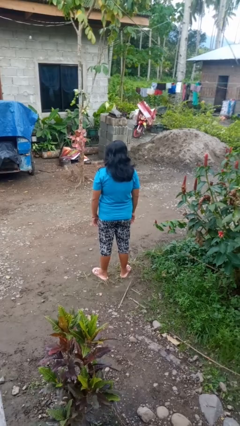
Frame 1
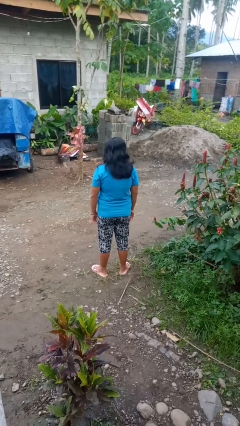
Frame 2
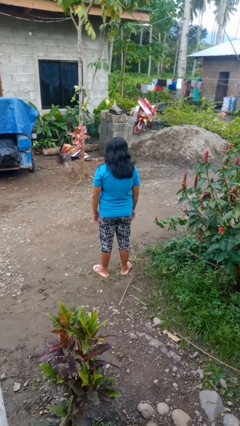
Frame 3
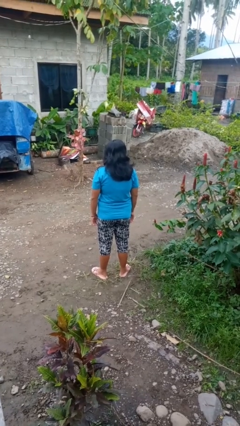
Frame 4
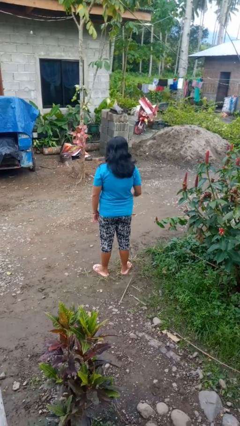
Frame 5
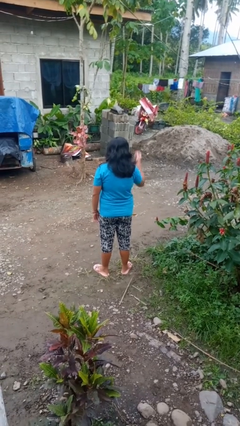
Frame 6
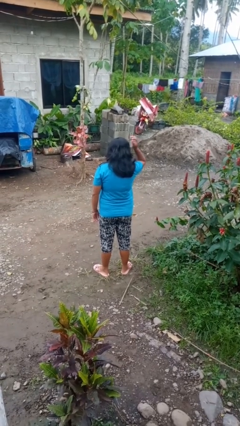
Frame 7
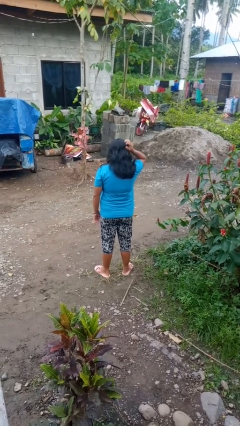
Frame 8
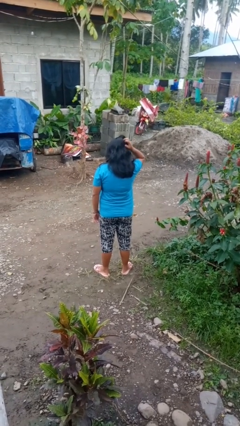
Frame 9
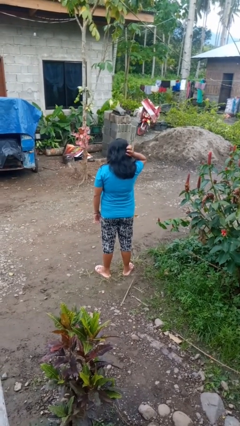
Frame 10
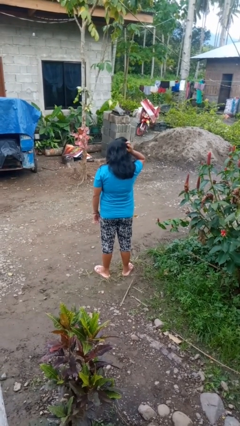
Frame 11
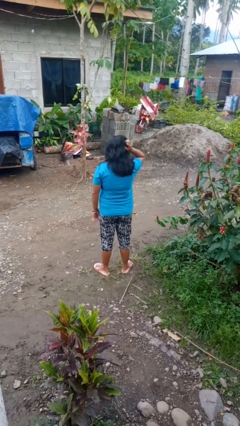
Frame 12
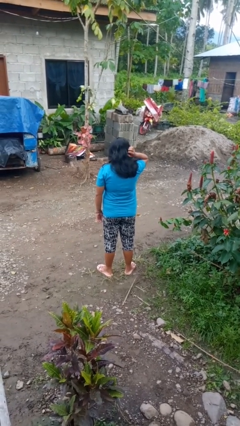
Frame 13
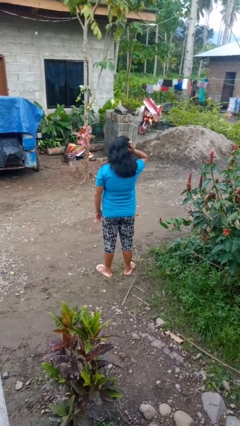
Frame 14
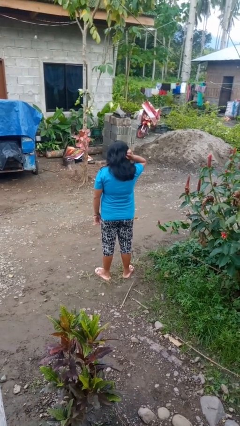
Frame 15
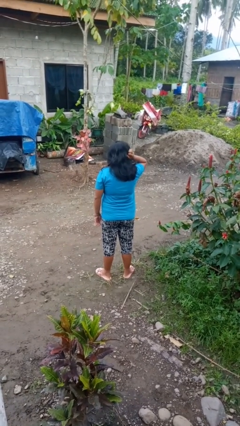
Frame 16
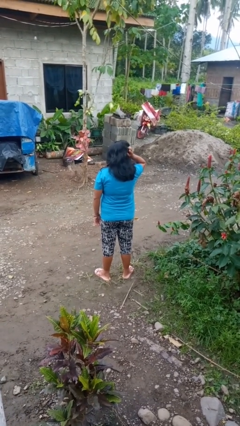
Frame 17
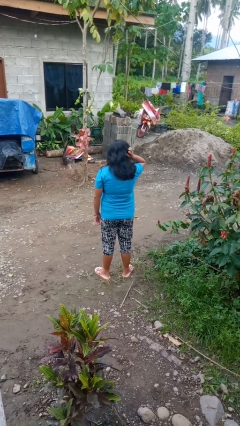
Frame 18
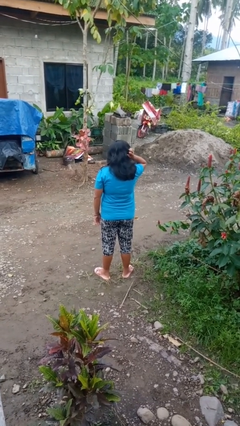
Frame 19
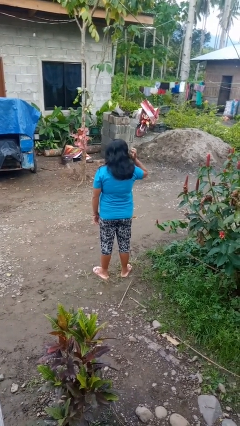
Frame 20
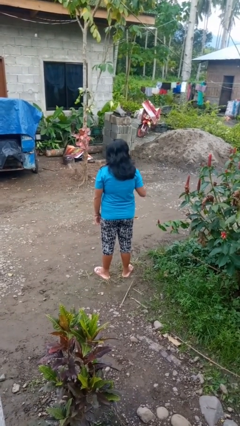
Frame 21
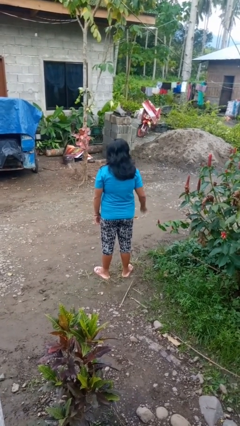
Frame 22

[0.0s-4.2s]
person scratches face

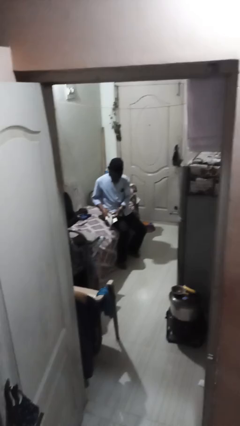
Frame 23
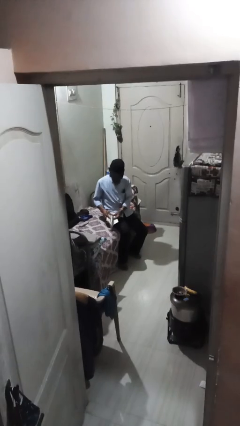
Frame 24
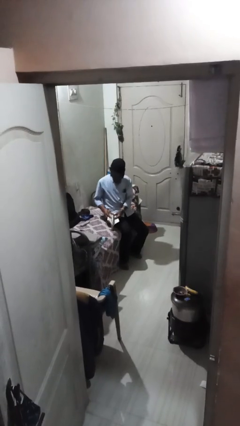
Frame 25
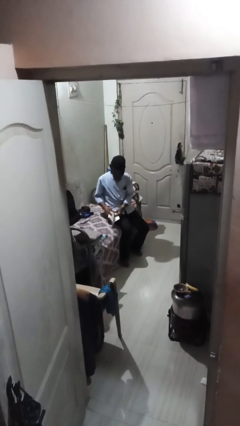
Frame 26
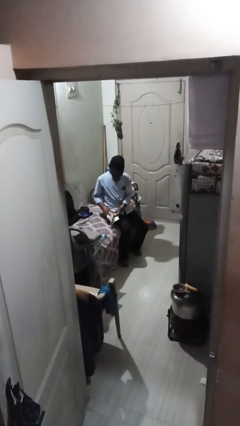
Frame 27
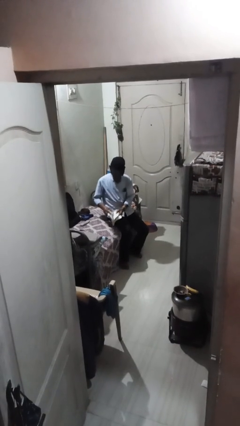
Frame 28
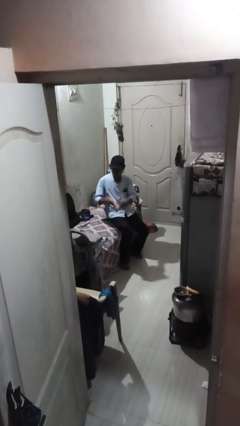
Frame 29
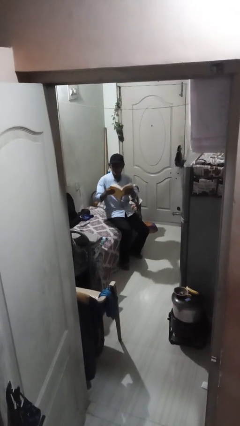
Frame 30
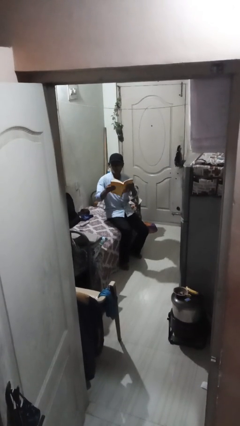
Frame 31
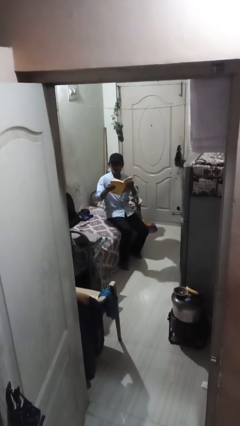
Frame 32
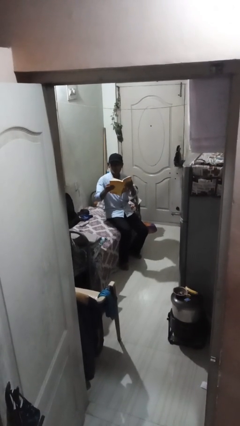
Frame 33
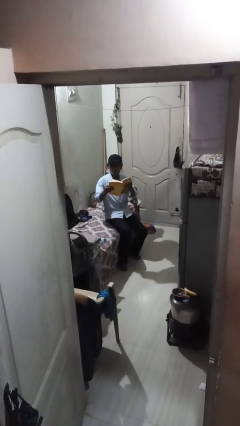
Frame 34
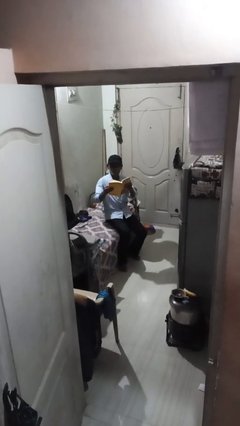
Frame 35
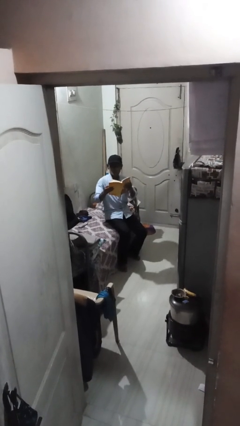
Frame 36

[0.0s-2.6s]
person reads book

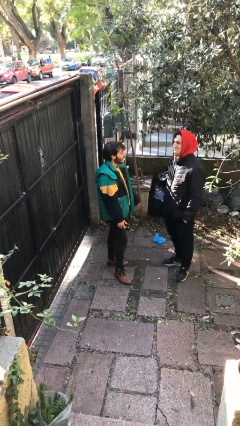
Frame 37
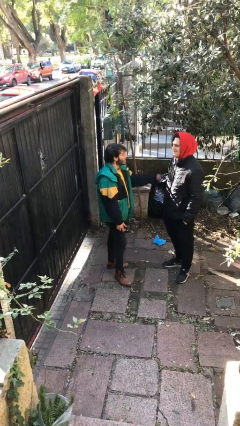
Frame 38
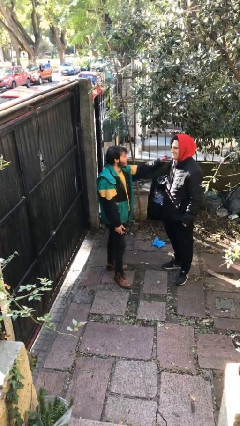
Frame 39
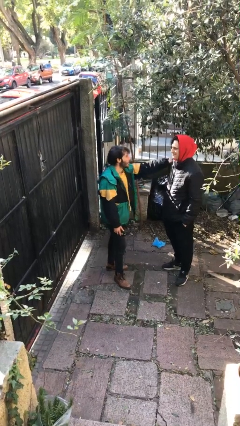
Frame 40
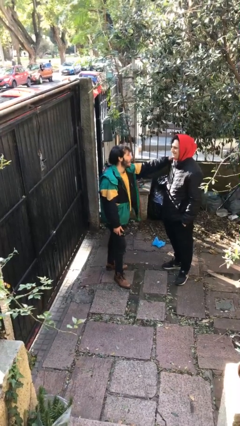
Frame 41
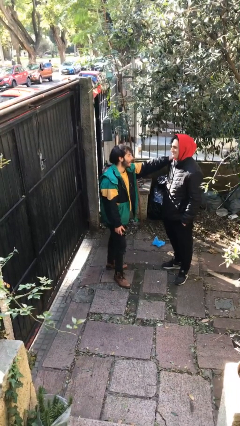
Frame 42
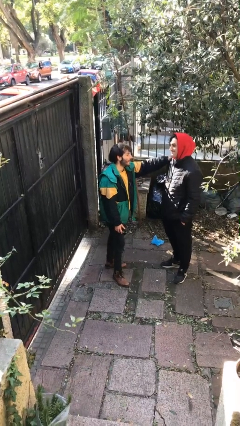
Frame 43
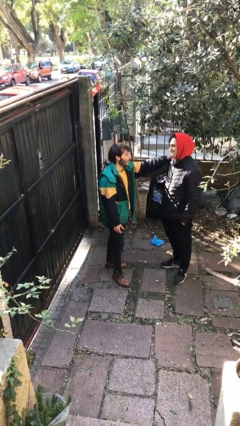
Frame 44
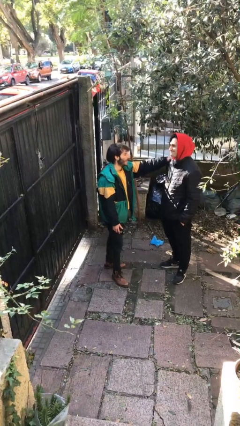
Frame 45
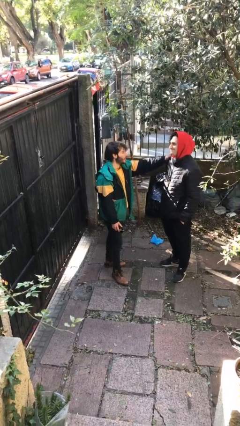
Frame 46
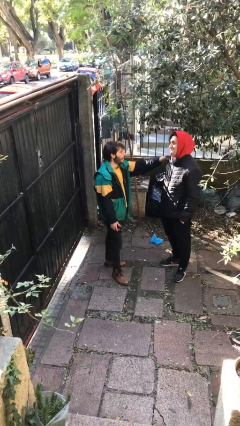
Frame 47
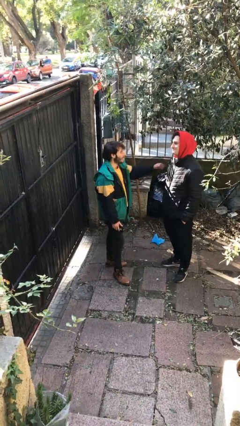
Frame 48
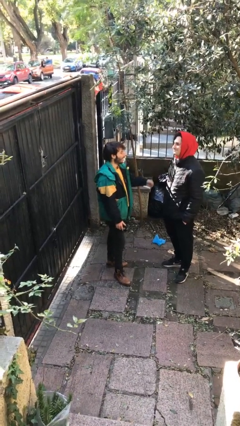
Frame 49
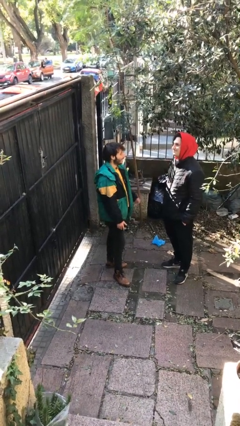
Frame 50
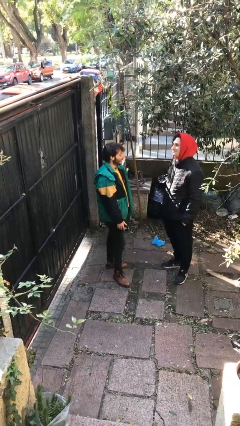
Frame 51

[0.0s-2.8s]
person pounds shoulders of person

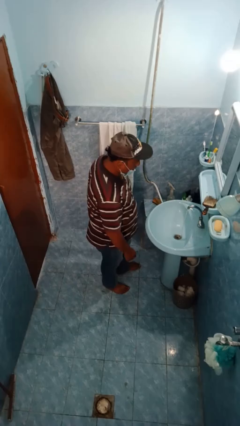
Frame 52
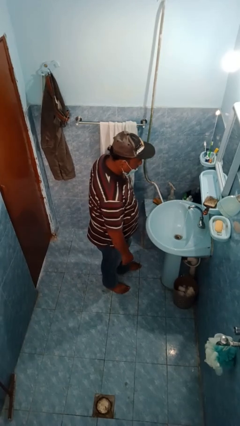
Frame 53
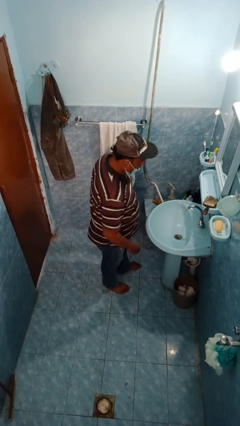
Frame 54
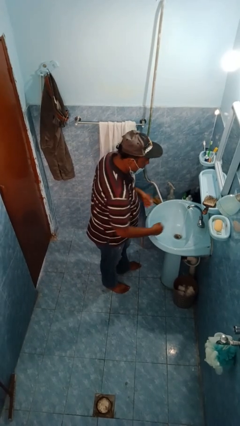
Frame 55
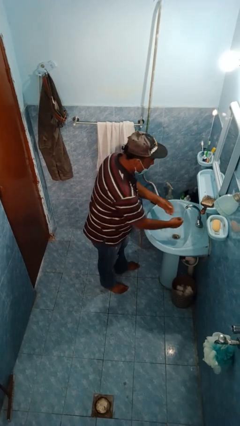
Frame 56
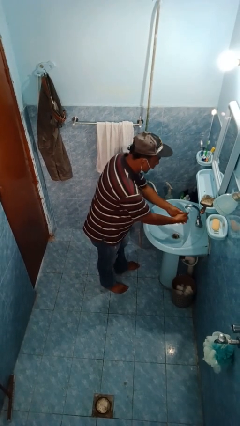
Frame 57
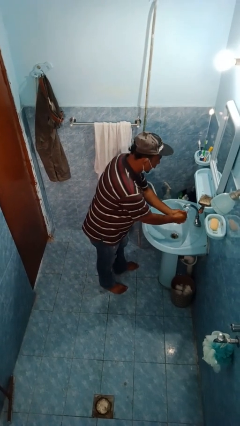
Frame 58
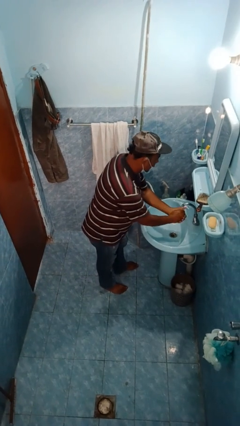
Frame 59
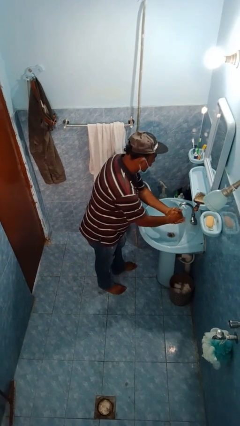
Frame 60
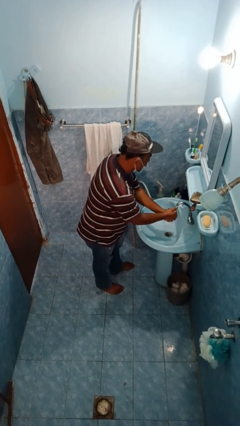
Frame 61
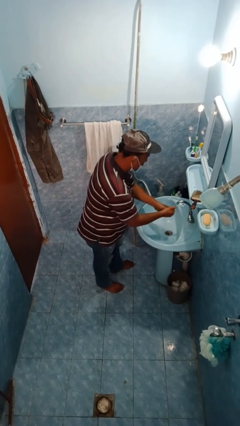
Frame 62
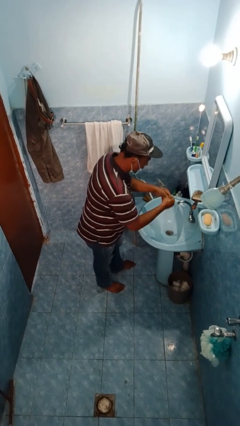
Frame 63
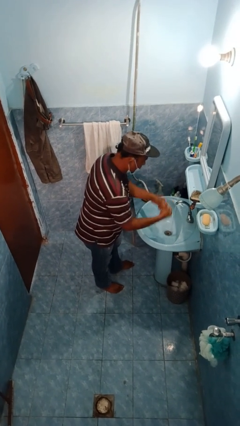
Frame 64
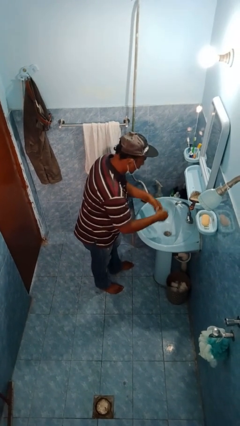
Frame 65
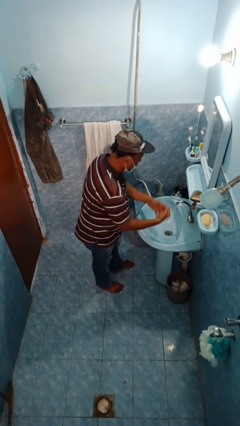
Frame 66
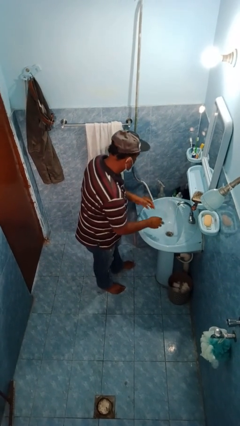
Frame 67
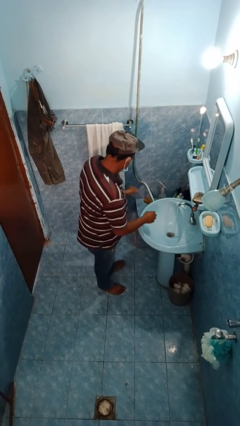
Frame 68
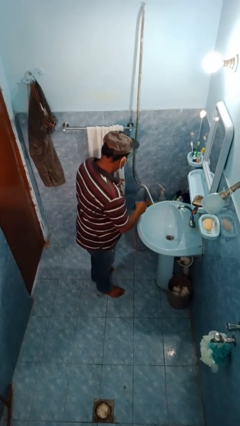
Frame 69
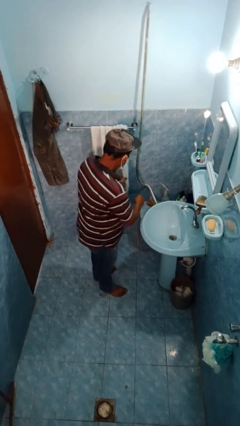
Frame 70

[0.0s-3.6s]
person washes hands

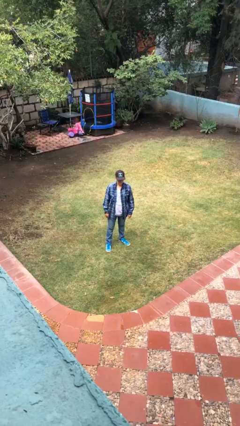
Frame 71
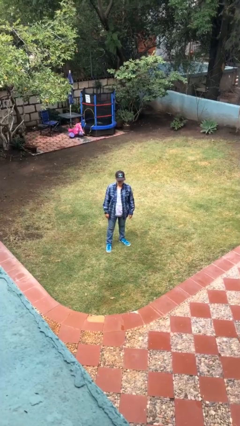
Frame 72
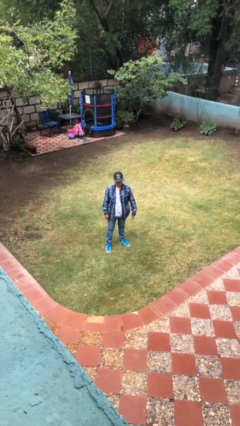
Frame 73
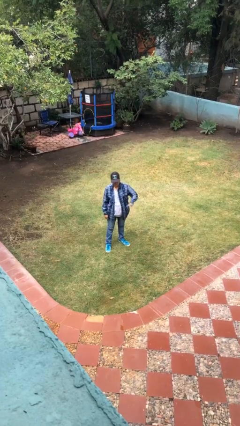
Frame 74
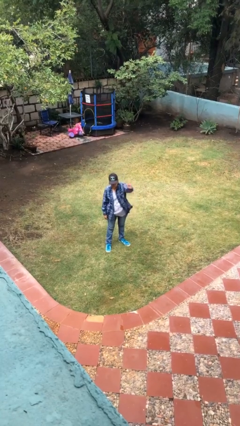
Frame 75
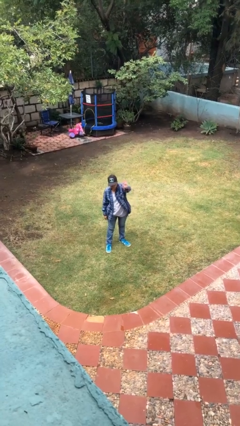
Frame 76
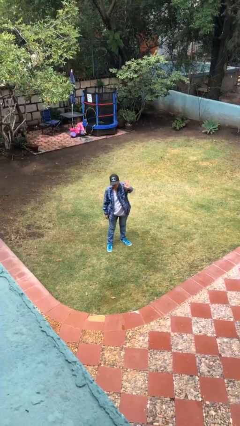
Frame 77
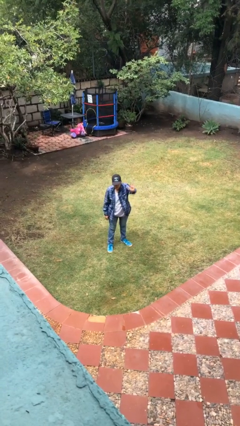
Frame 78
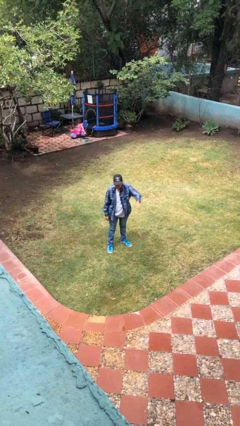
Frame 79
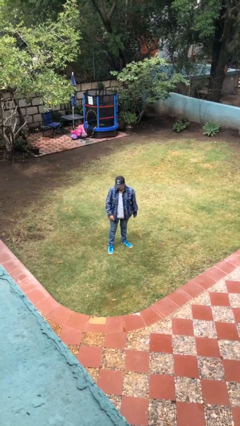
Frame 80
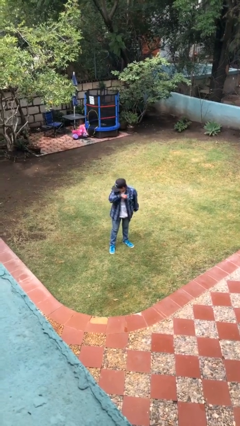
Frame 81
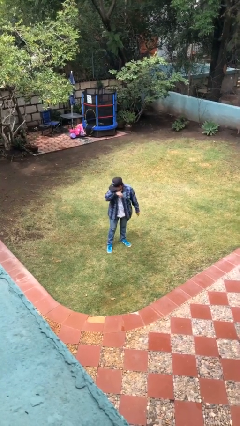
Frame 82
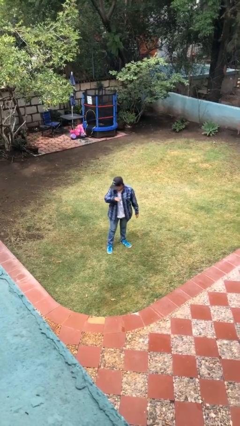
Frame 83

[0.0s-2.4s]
person waves at person

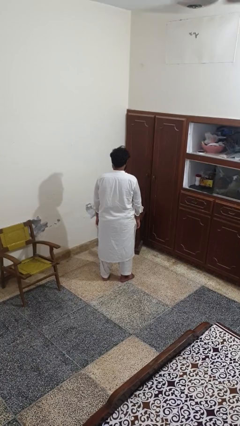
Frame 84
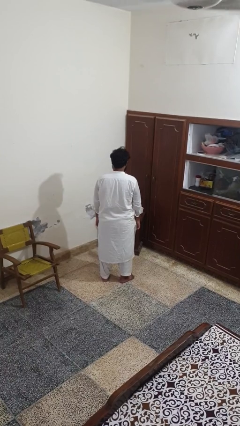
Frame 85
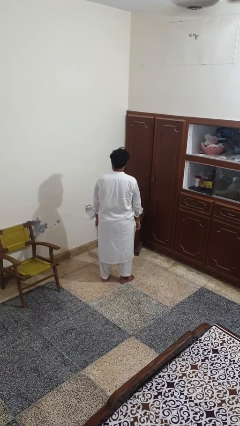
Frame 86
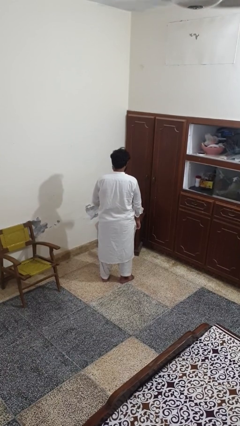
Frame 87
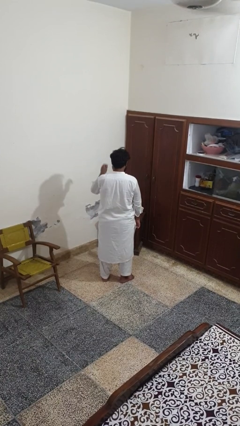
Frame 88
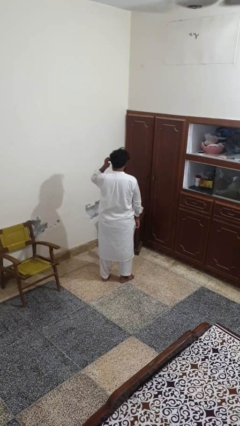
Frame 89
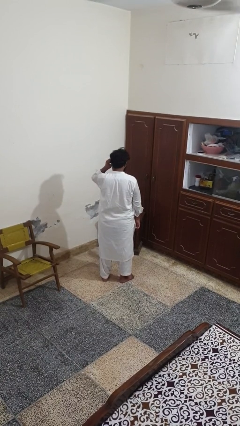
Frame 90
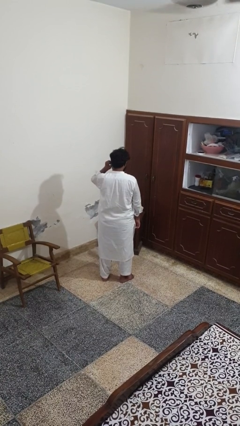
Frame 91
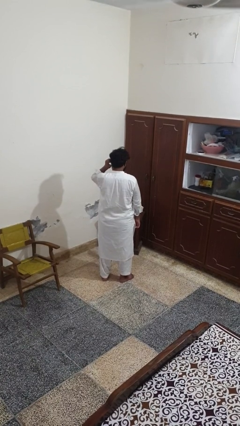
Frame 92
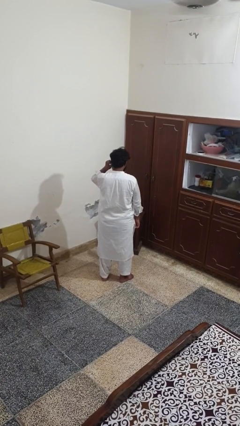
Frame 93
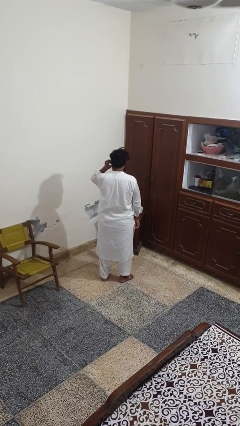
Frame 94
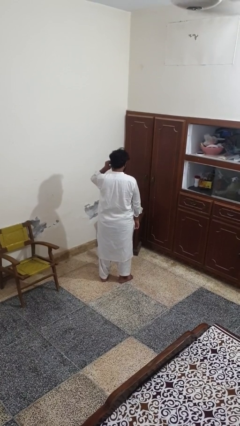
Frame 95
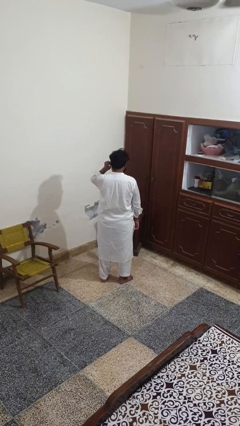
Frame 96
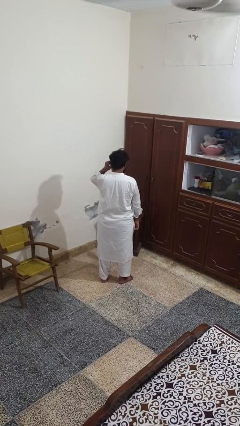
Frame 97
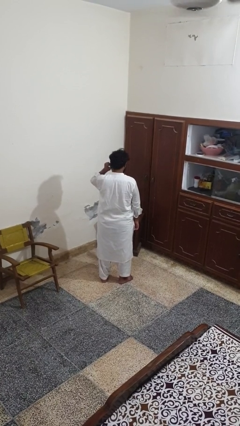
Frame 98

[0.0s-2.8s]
person touches earlobe
